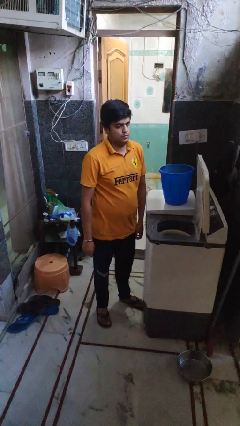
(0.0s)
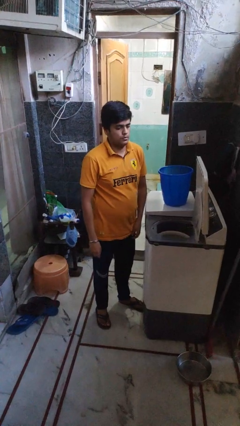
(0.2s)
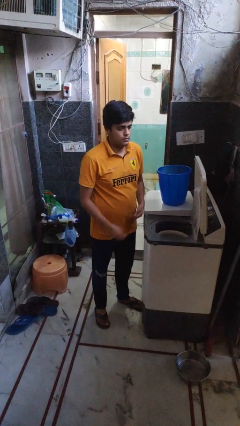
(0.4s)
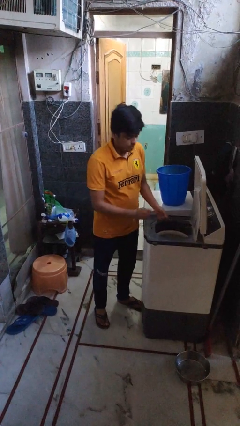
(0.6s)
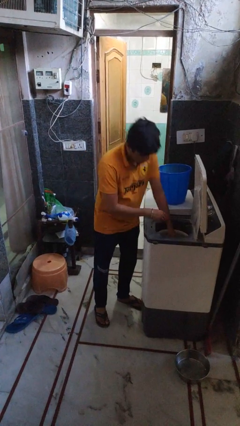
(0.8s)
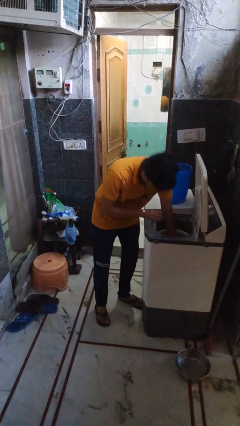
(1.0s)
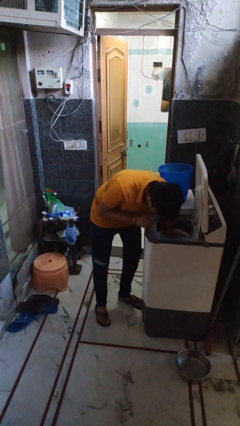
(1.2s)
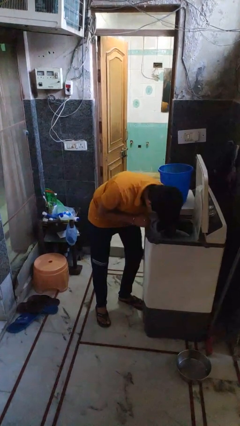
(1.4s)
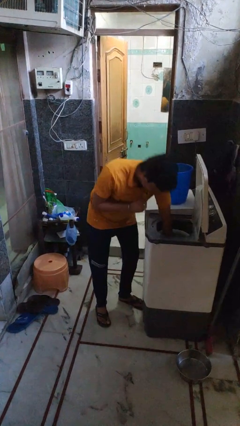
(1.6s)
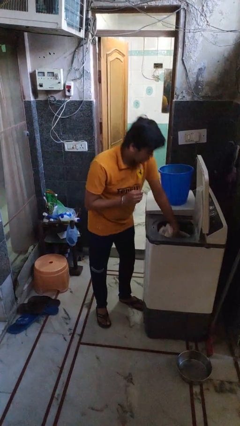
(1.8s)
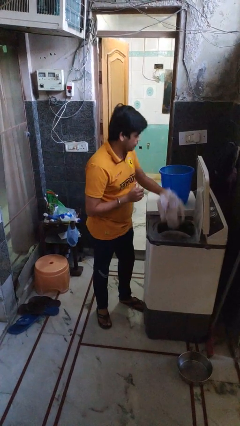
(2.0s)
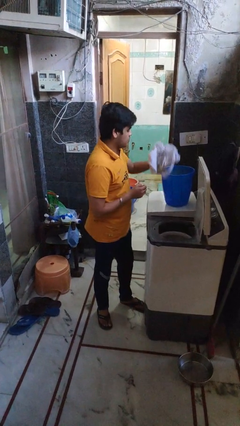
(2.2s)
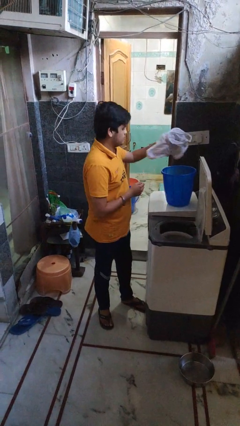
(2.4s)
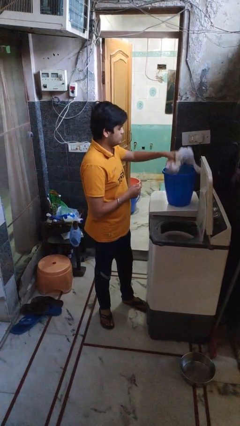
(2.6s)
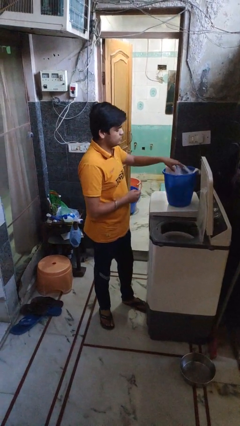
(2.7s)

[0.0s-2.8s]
person unloads clotheswasher

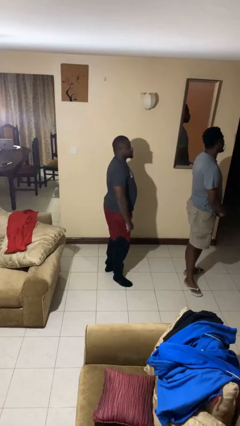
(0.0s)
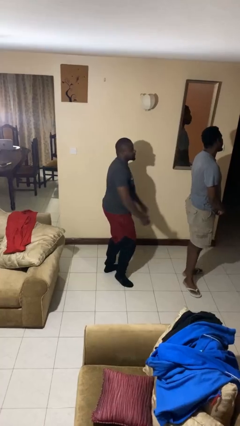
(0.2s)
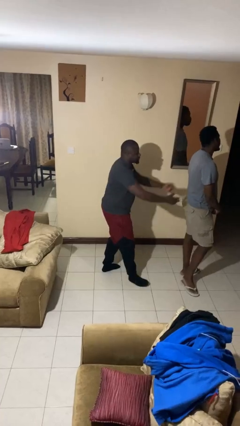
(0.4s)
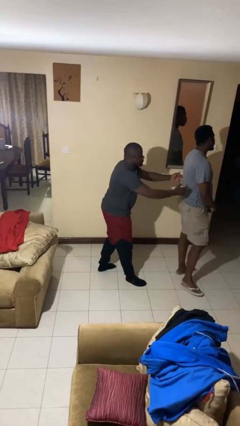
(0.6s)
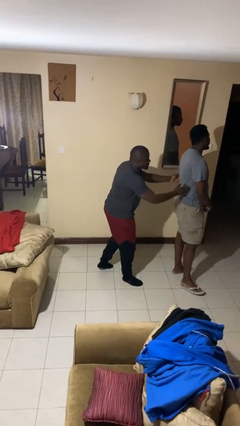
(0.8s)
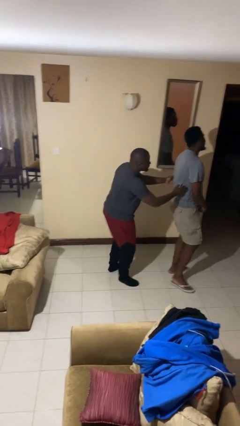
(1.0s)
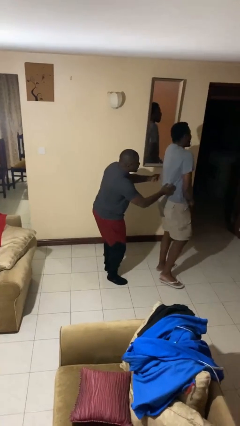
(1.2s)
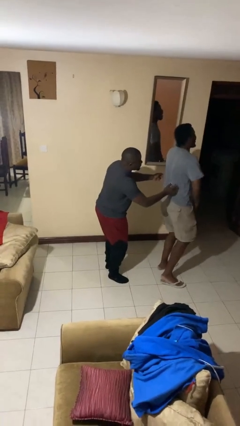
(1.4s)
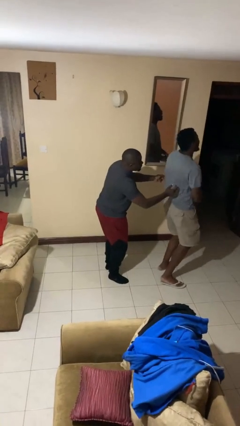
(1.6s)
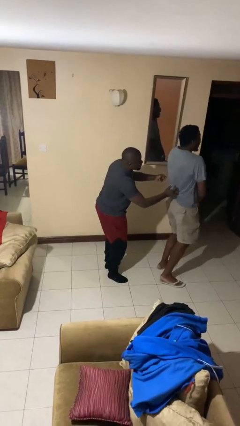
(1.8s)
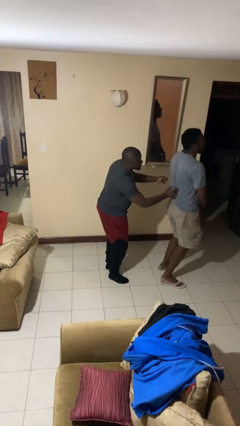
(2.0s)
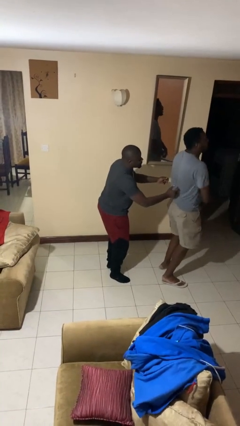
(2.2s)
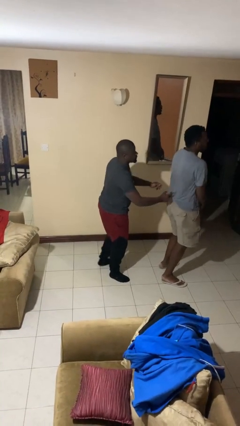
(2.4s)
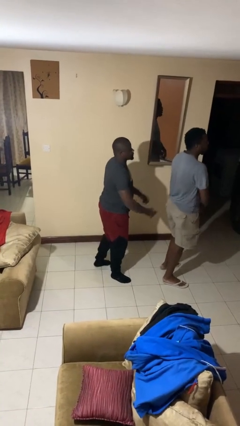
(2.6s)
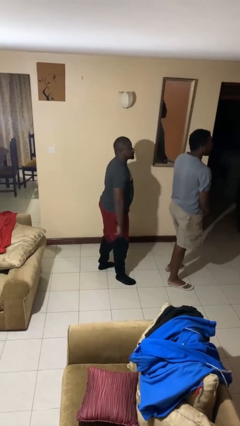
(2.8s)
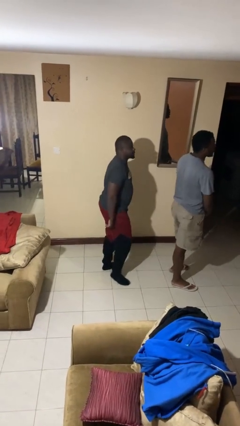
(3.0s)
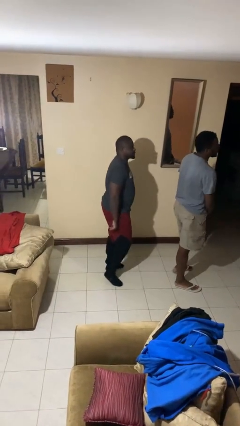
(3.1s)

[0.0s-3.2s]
person tickles person

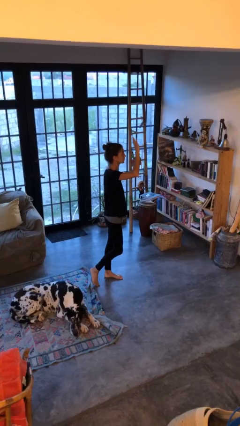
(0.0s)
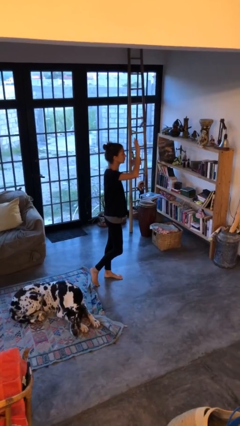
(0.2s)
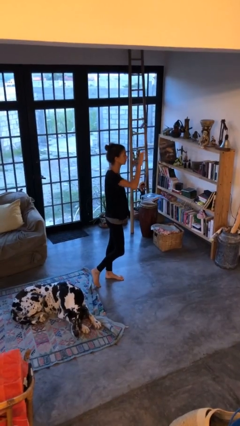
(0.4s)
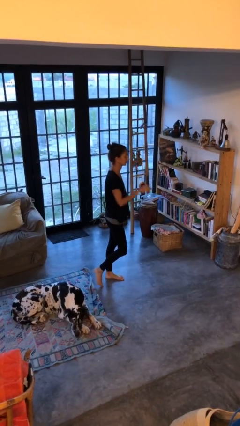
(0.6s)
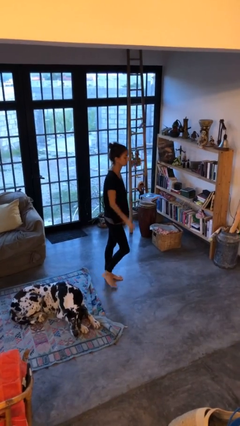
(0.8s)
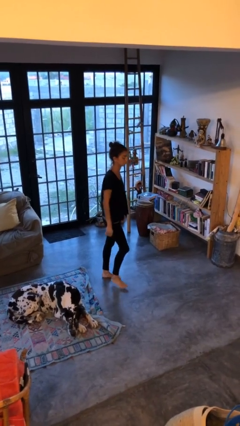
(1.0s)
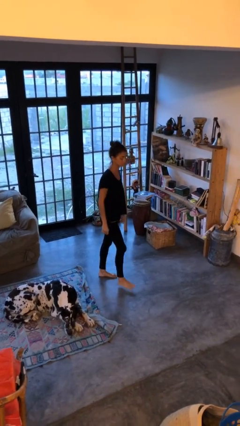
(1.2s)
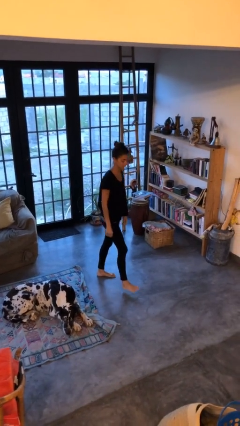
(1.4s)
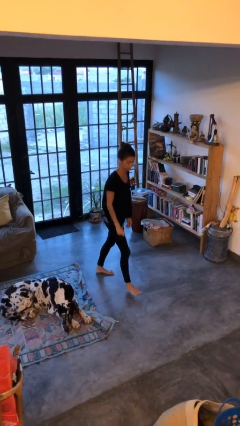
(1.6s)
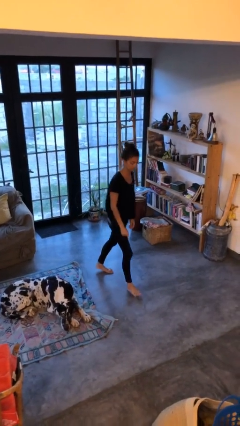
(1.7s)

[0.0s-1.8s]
person gestures lower hand

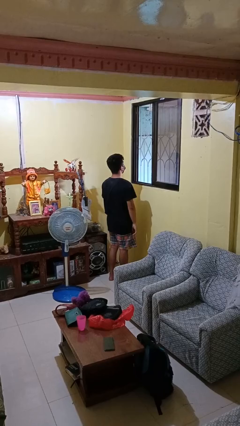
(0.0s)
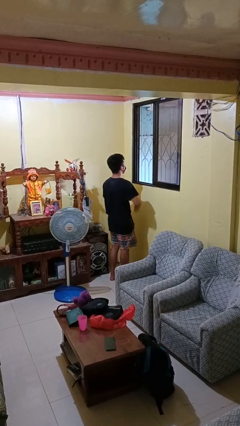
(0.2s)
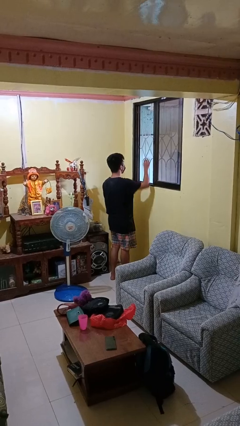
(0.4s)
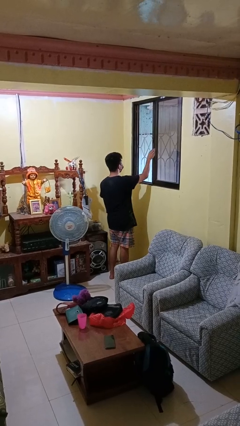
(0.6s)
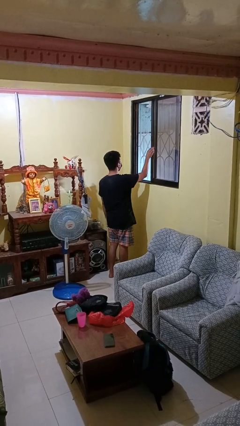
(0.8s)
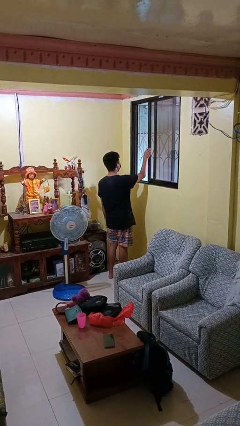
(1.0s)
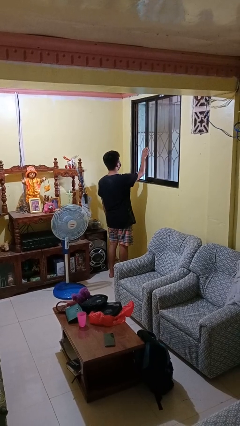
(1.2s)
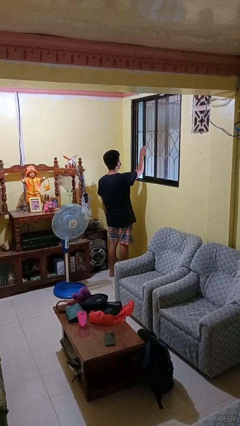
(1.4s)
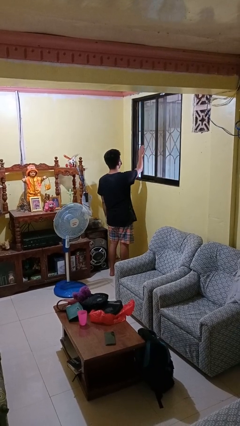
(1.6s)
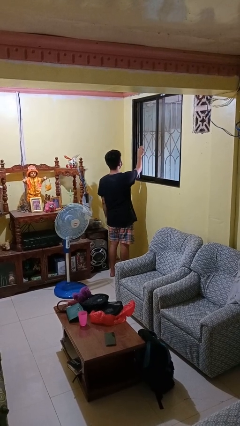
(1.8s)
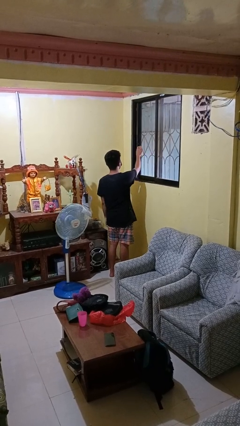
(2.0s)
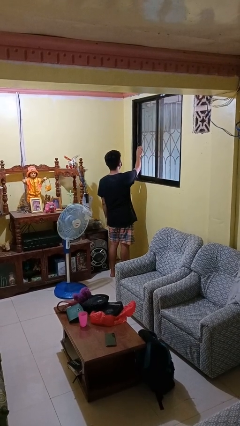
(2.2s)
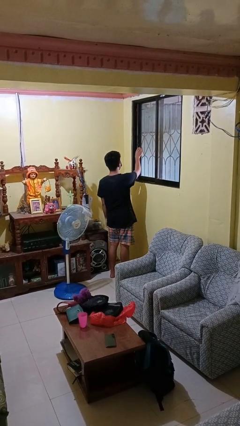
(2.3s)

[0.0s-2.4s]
person closes home window

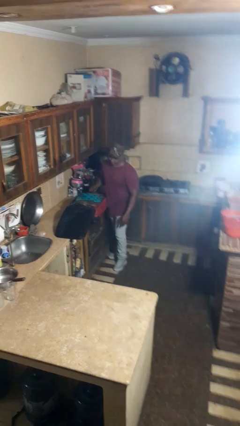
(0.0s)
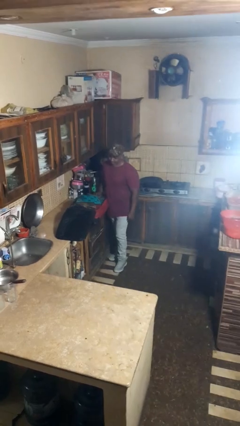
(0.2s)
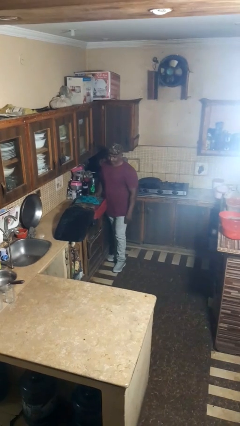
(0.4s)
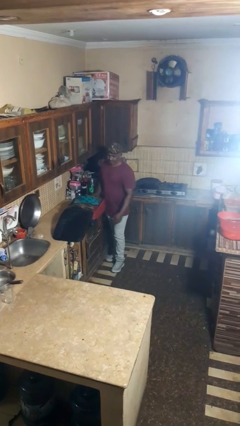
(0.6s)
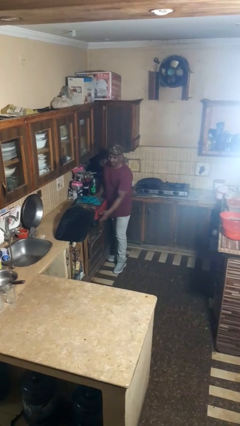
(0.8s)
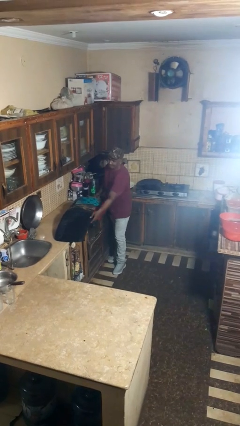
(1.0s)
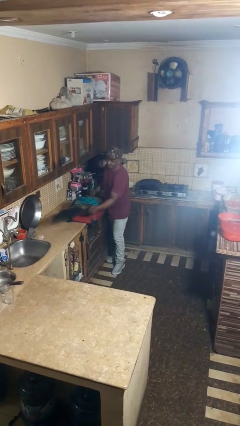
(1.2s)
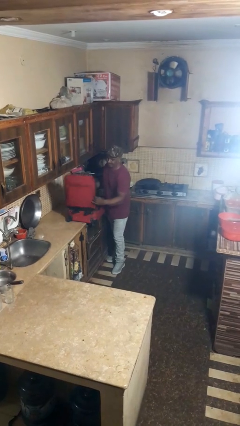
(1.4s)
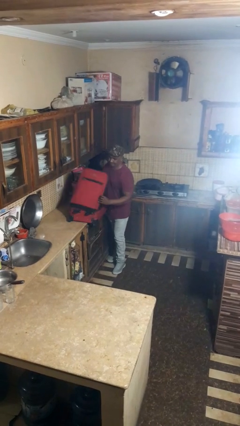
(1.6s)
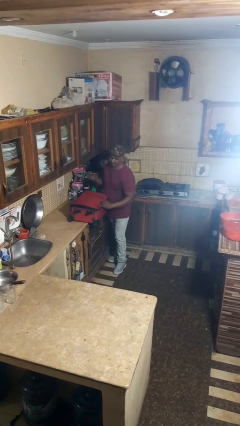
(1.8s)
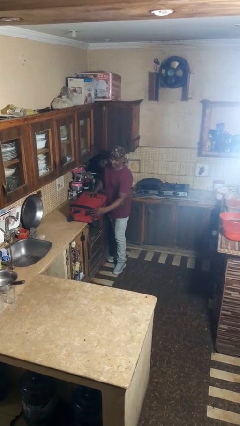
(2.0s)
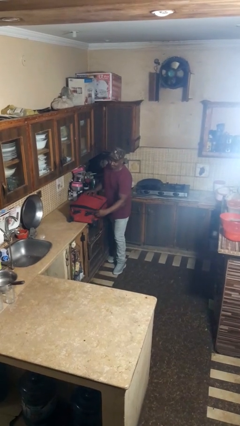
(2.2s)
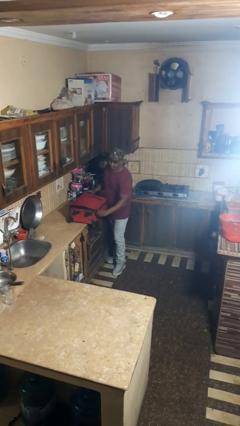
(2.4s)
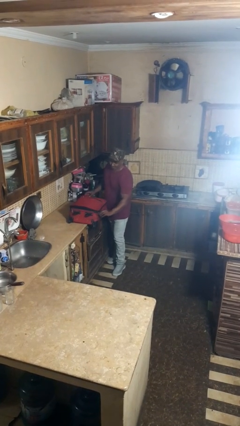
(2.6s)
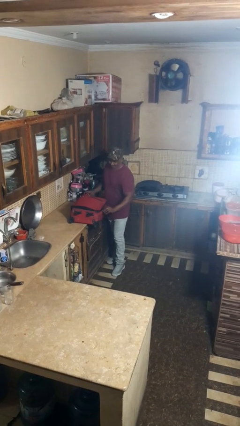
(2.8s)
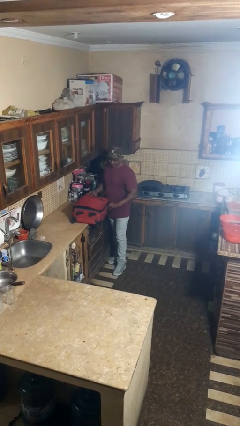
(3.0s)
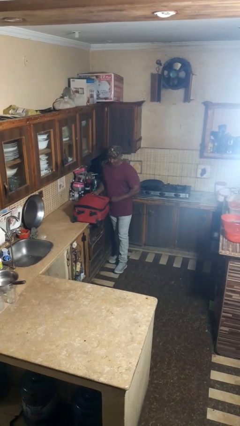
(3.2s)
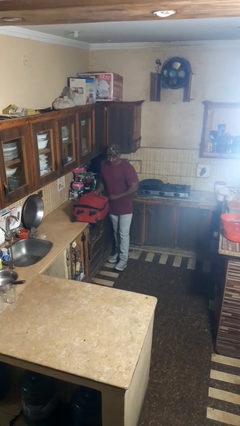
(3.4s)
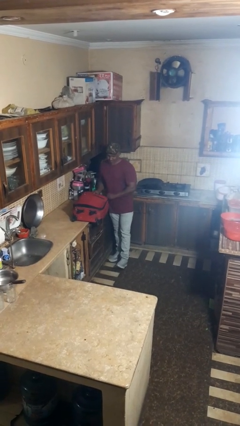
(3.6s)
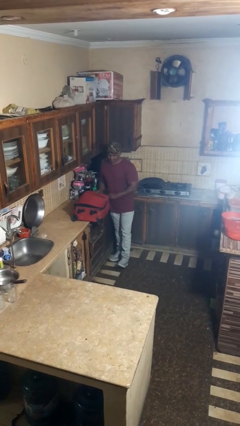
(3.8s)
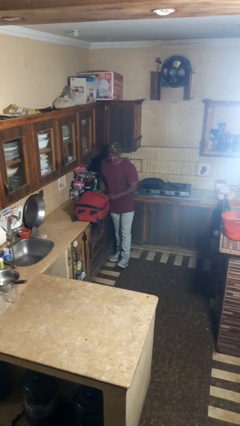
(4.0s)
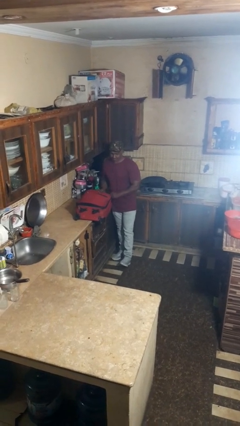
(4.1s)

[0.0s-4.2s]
person closes suitcase

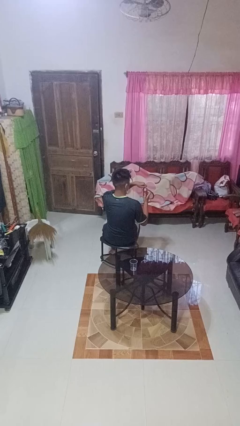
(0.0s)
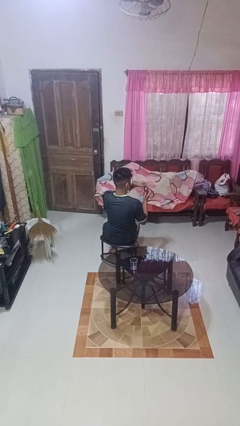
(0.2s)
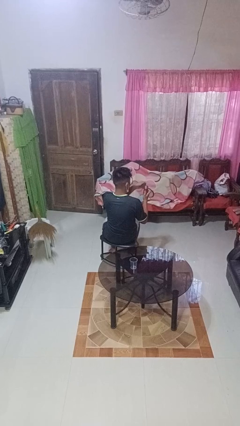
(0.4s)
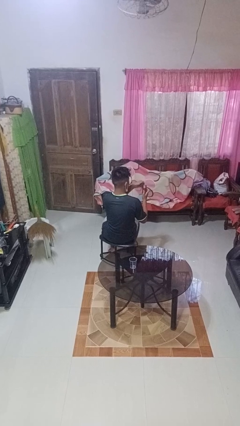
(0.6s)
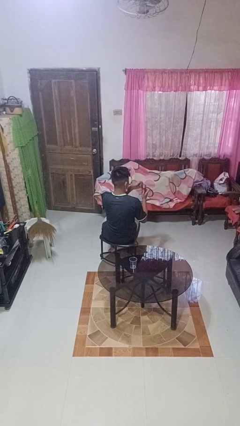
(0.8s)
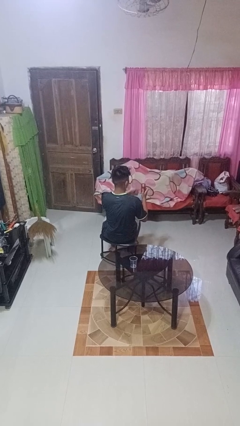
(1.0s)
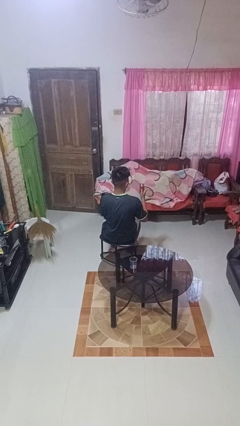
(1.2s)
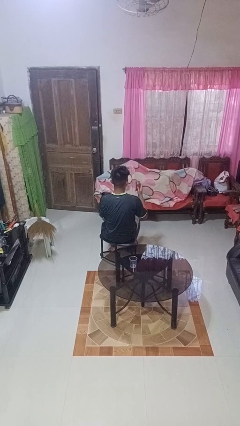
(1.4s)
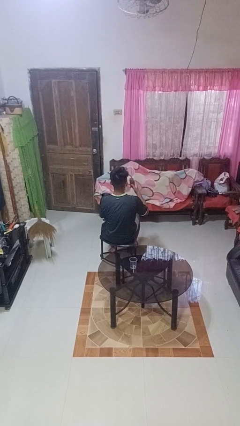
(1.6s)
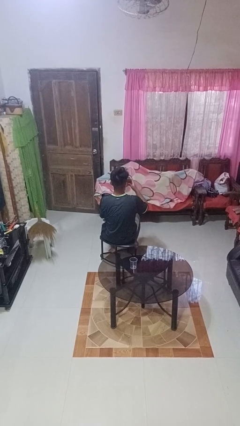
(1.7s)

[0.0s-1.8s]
person opens beverage can

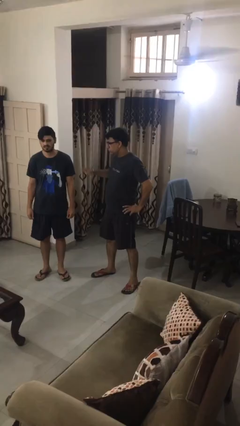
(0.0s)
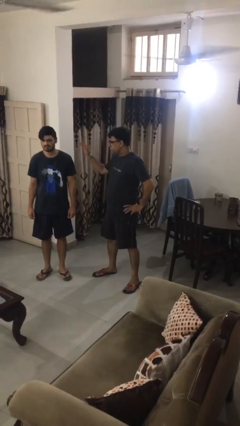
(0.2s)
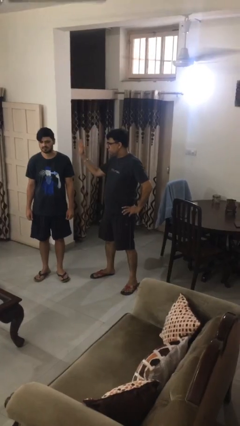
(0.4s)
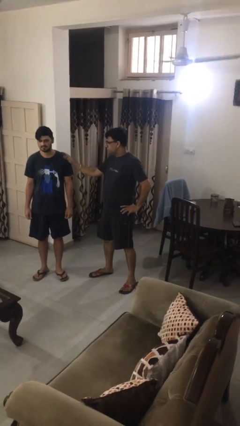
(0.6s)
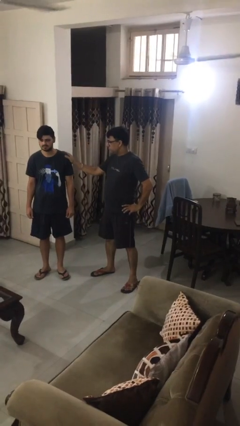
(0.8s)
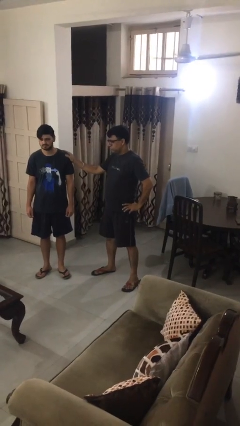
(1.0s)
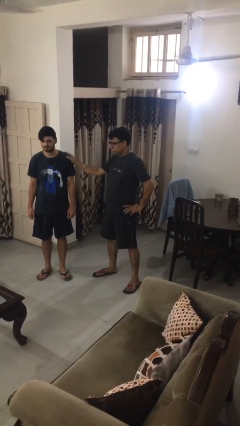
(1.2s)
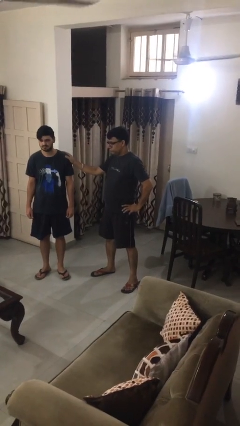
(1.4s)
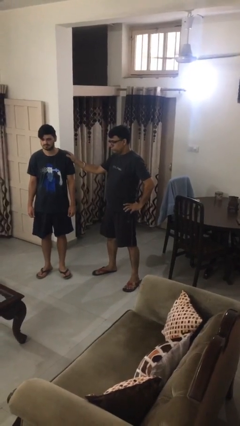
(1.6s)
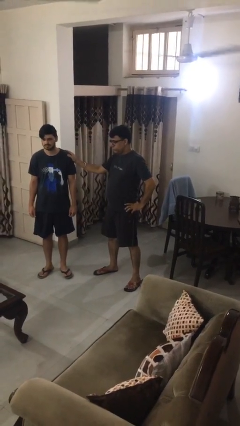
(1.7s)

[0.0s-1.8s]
person pounds shoulders of person
